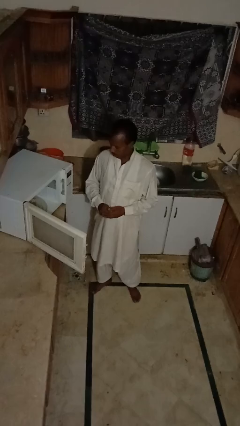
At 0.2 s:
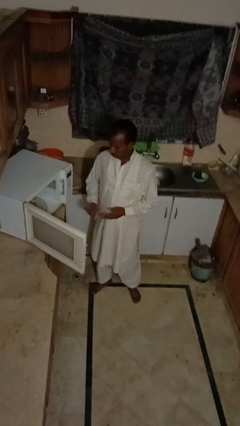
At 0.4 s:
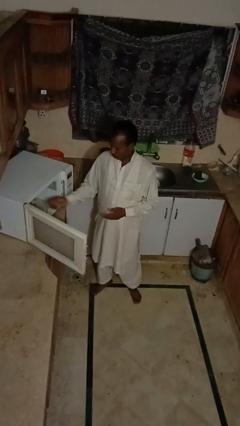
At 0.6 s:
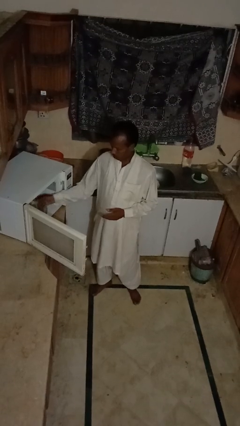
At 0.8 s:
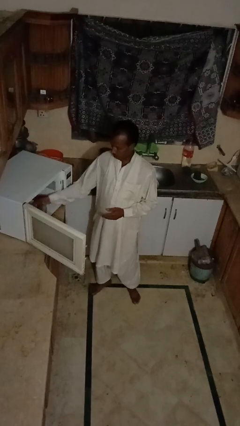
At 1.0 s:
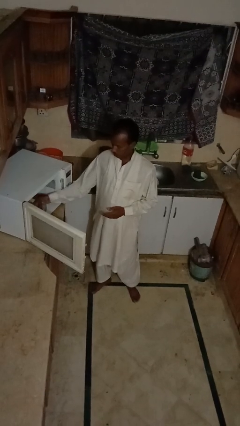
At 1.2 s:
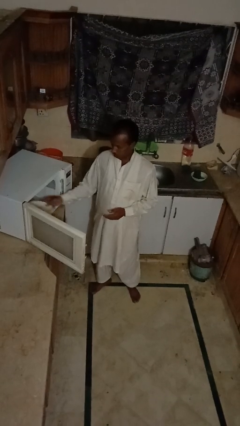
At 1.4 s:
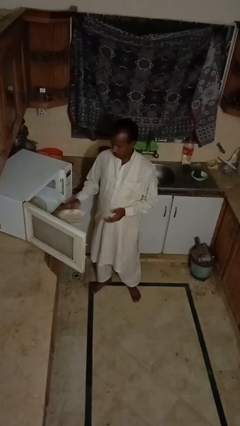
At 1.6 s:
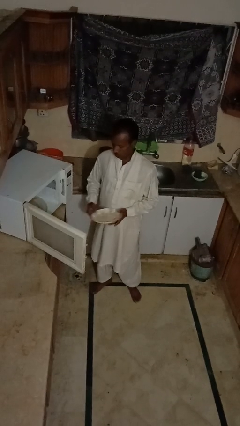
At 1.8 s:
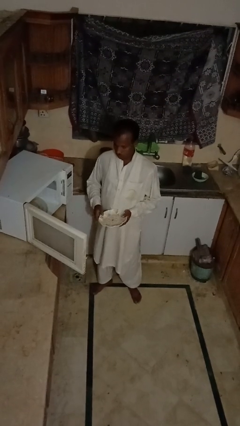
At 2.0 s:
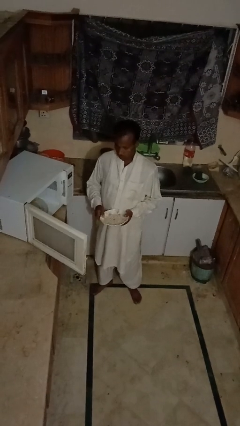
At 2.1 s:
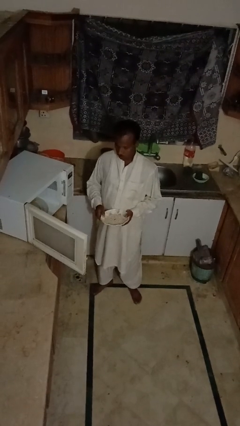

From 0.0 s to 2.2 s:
person takes object from microwave

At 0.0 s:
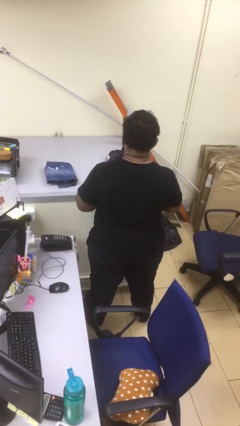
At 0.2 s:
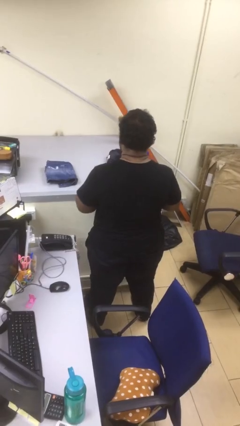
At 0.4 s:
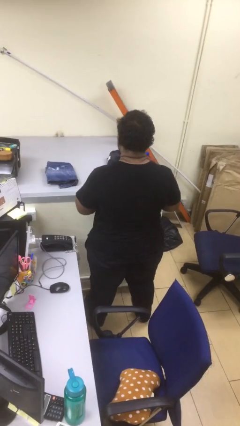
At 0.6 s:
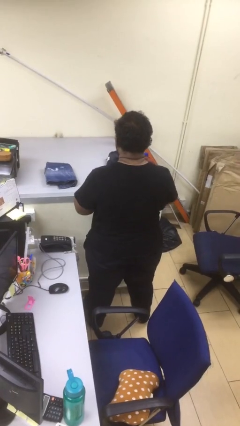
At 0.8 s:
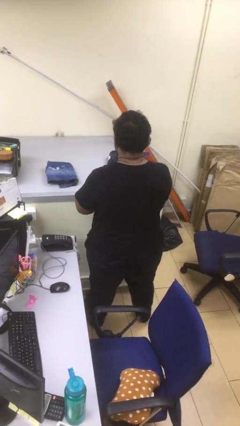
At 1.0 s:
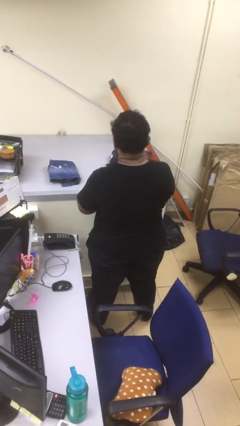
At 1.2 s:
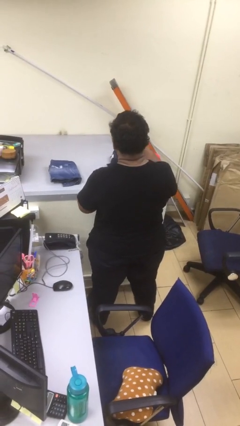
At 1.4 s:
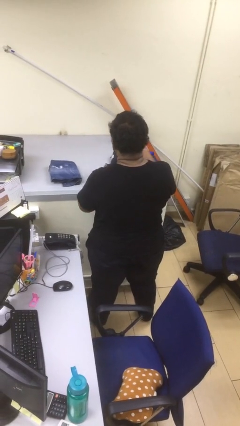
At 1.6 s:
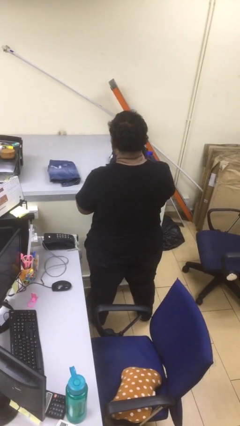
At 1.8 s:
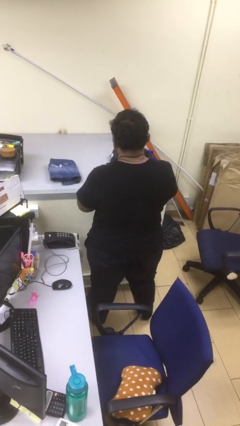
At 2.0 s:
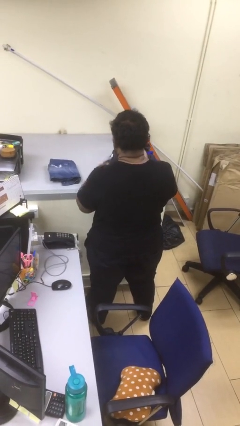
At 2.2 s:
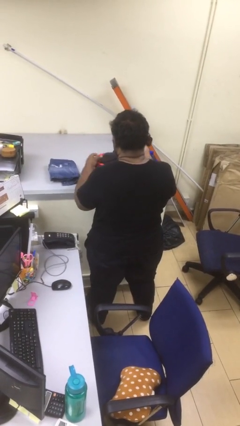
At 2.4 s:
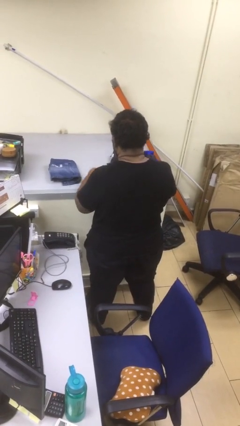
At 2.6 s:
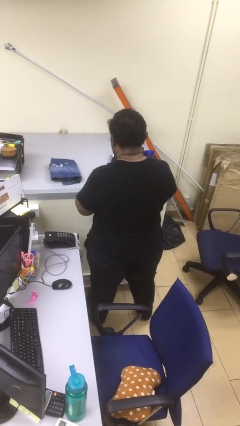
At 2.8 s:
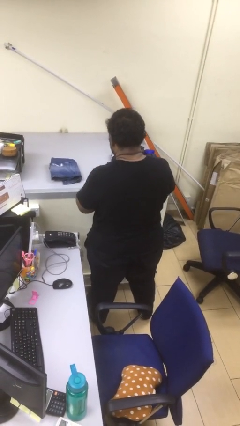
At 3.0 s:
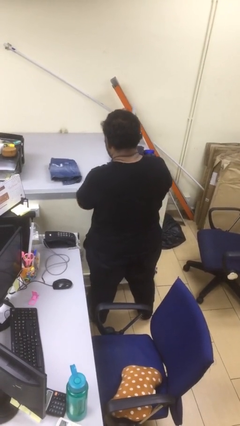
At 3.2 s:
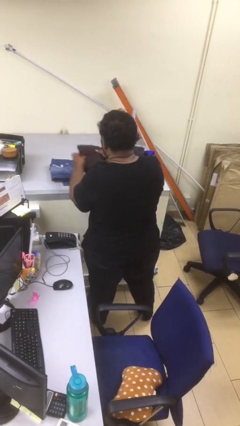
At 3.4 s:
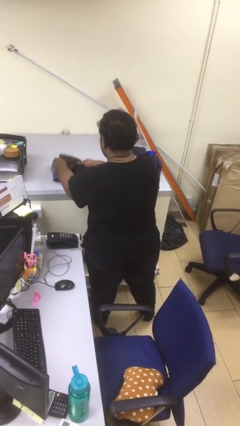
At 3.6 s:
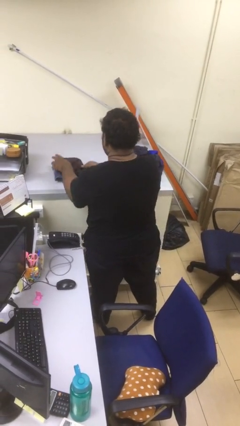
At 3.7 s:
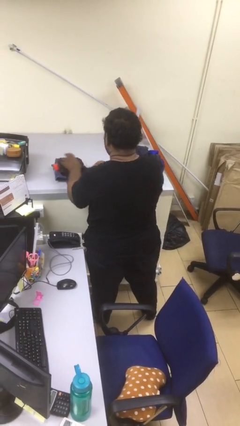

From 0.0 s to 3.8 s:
person folds shirt

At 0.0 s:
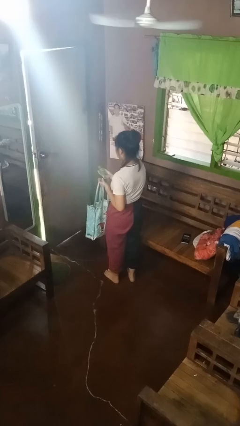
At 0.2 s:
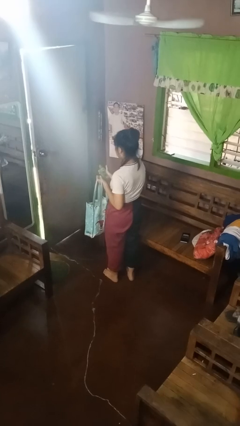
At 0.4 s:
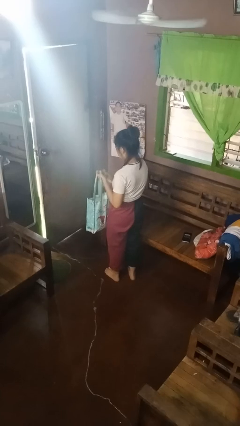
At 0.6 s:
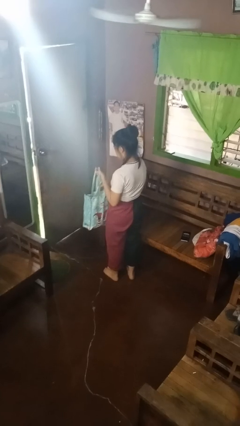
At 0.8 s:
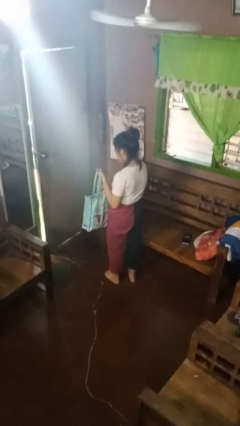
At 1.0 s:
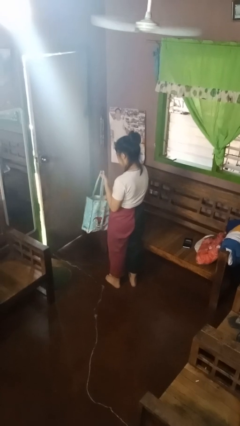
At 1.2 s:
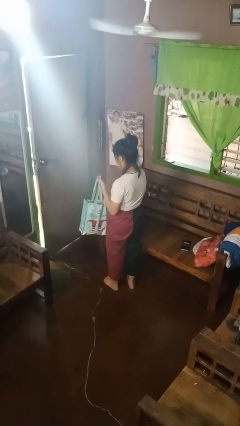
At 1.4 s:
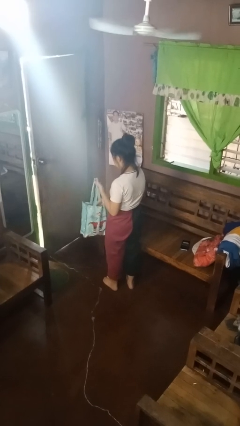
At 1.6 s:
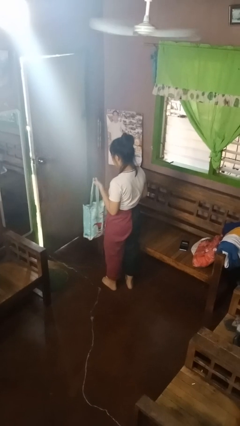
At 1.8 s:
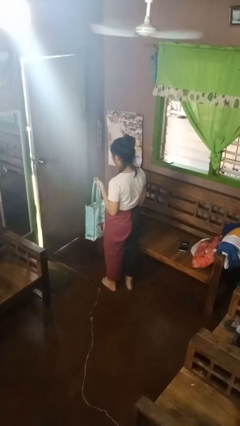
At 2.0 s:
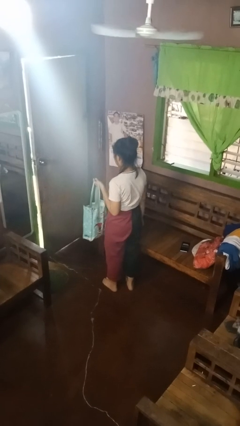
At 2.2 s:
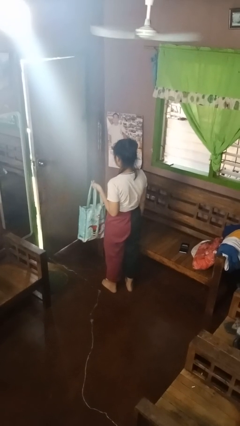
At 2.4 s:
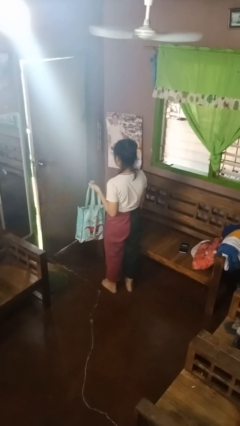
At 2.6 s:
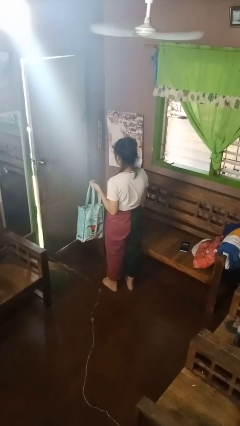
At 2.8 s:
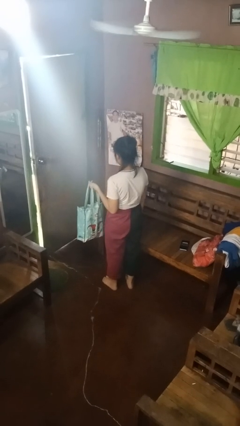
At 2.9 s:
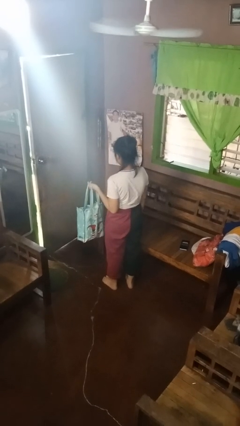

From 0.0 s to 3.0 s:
person puts object into bag

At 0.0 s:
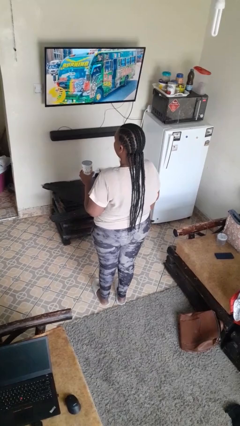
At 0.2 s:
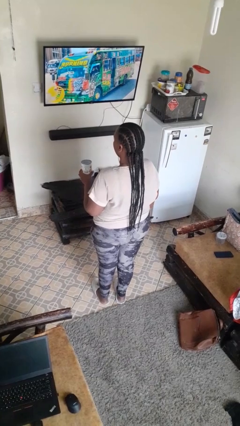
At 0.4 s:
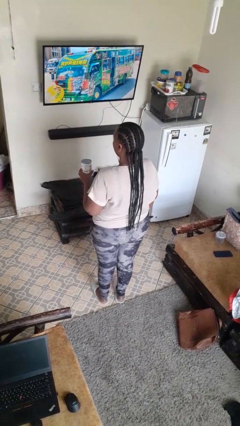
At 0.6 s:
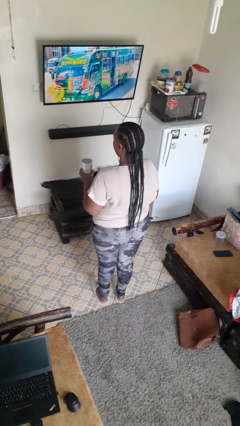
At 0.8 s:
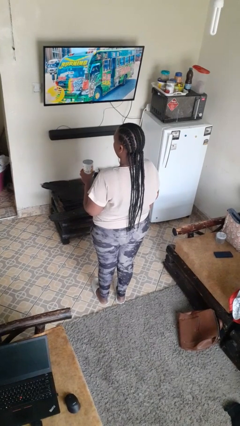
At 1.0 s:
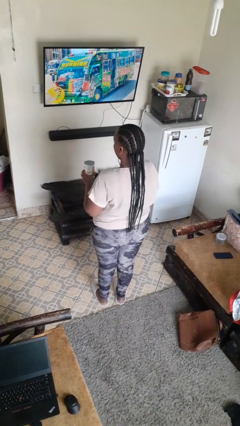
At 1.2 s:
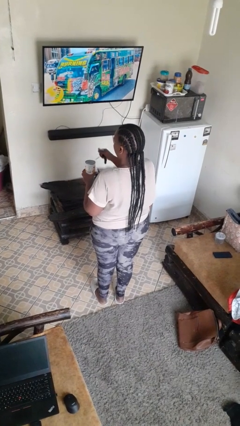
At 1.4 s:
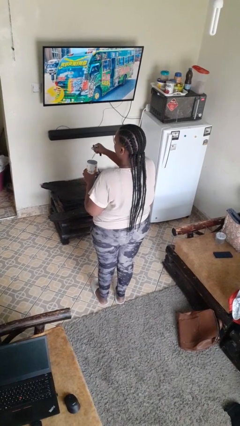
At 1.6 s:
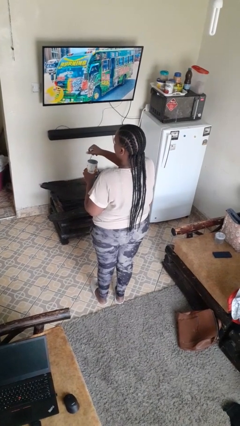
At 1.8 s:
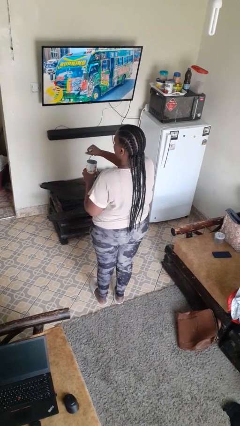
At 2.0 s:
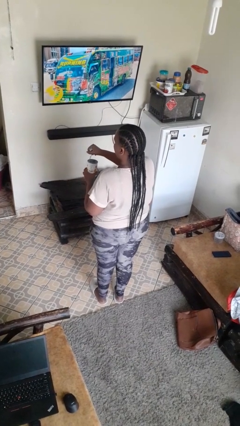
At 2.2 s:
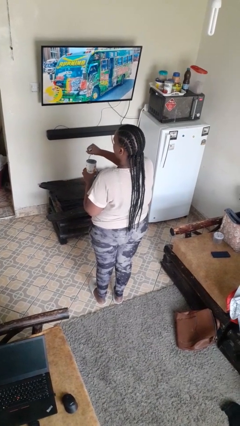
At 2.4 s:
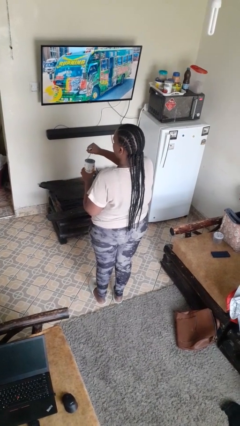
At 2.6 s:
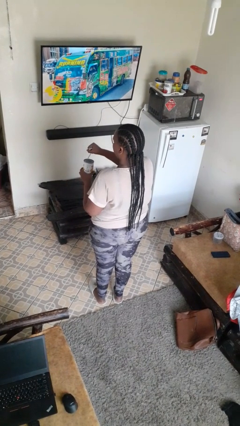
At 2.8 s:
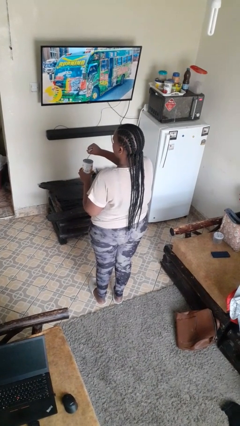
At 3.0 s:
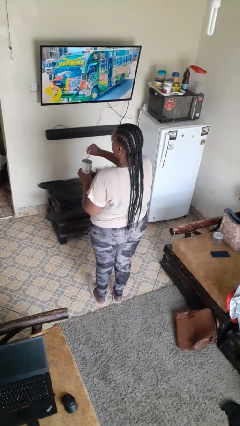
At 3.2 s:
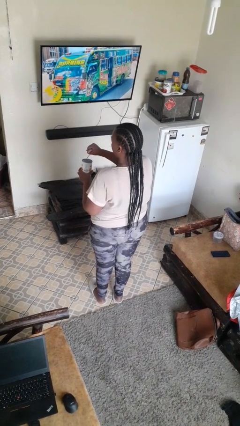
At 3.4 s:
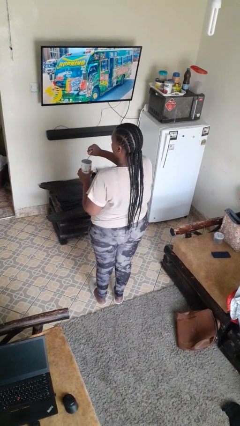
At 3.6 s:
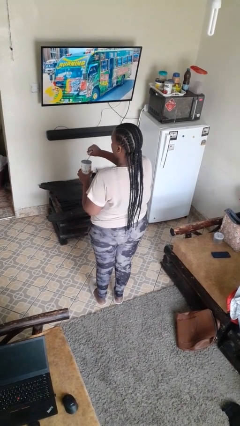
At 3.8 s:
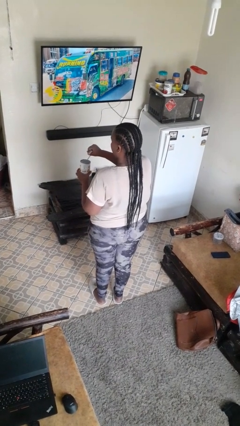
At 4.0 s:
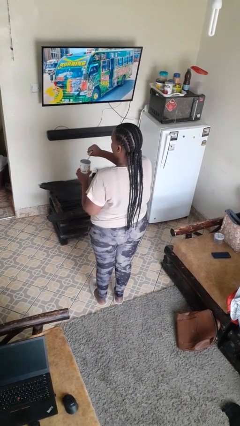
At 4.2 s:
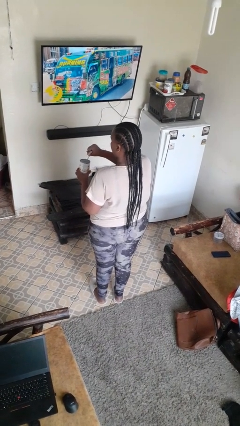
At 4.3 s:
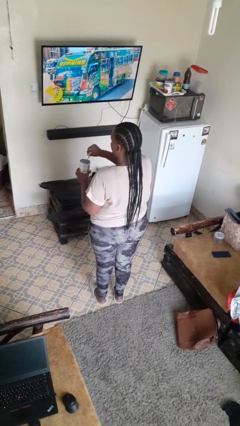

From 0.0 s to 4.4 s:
person opens can with can opener

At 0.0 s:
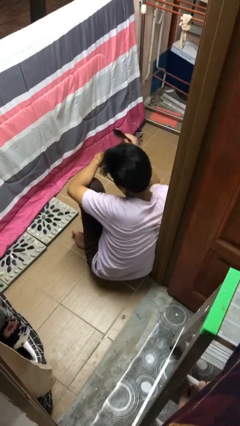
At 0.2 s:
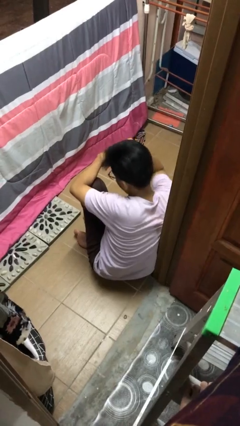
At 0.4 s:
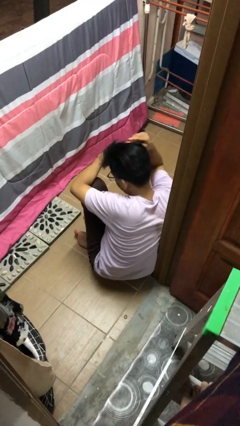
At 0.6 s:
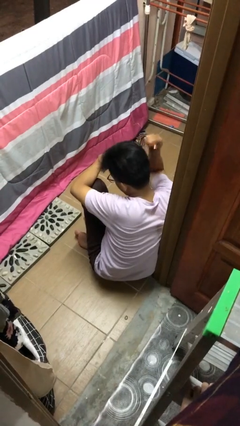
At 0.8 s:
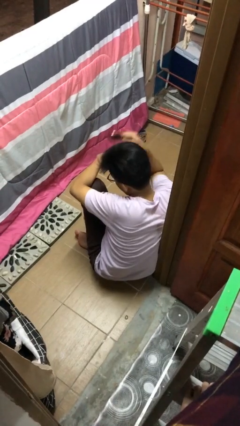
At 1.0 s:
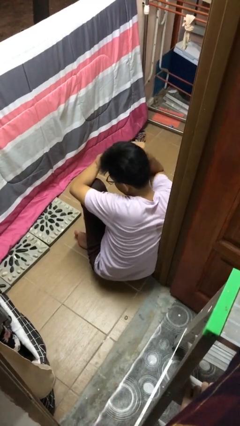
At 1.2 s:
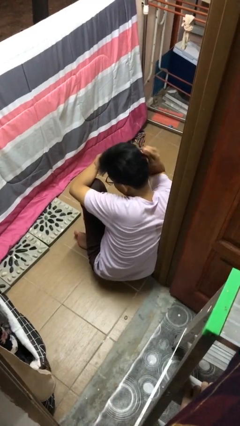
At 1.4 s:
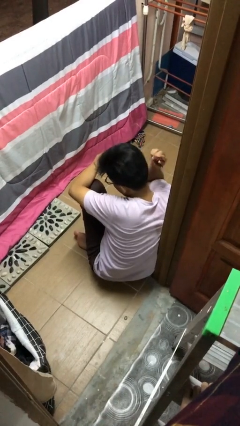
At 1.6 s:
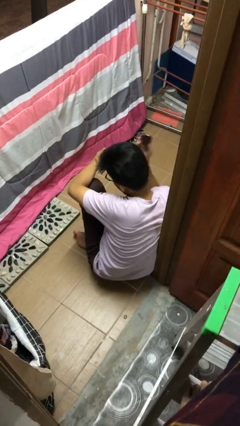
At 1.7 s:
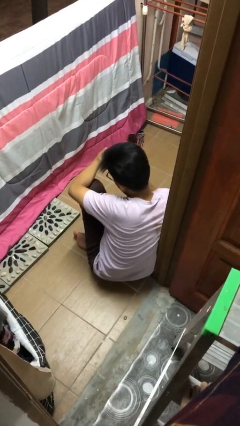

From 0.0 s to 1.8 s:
person brushes hair

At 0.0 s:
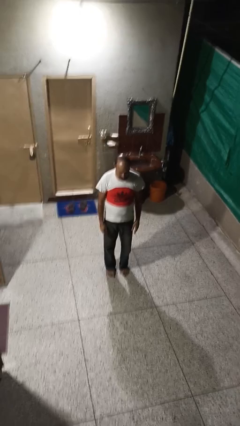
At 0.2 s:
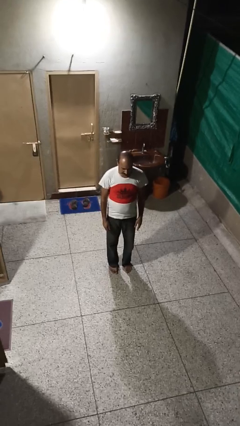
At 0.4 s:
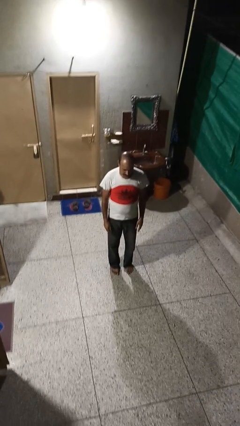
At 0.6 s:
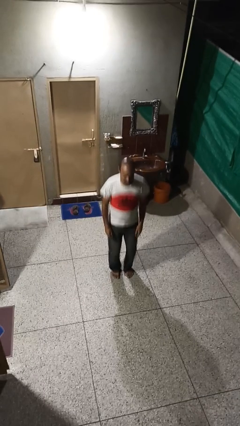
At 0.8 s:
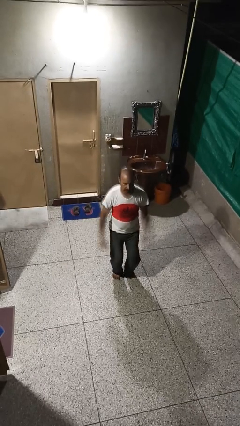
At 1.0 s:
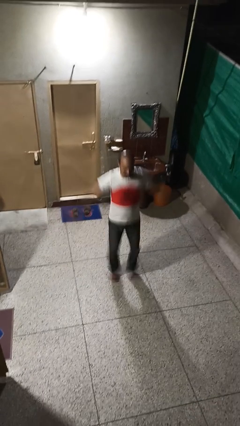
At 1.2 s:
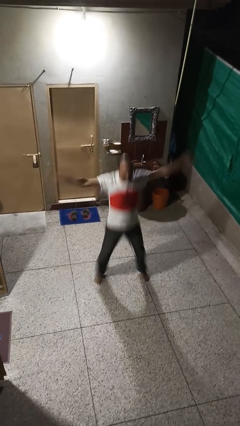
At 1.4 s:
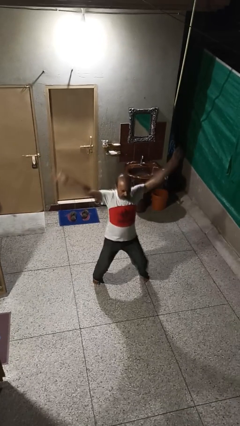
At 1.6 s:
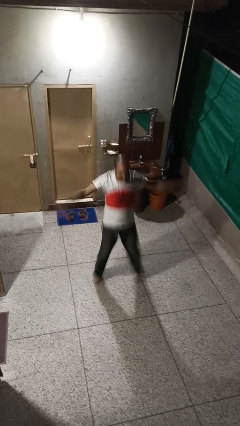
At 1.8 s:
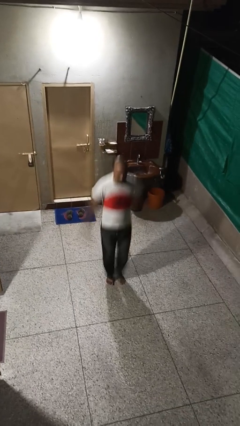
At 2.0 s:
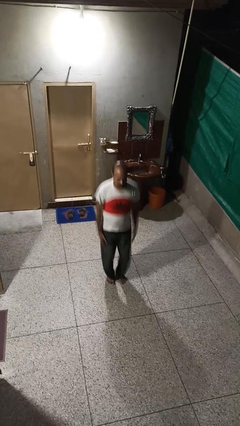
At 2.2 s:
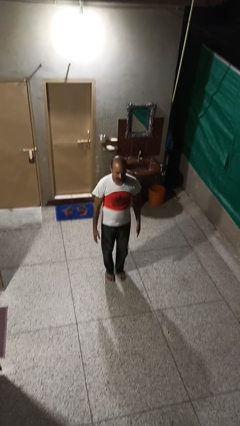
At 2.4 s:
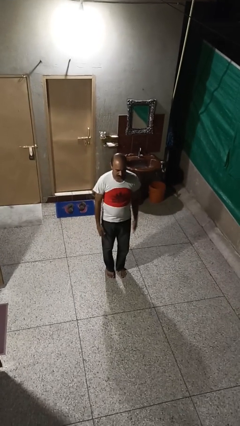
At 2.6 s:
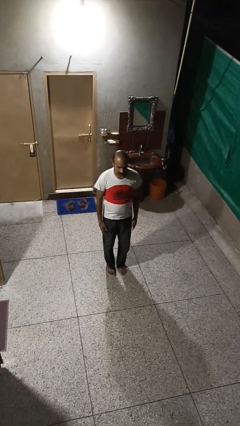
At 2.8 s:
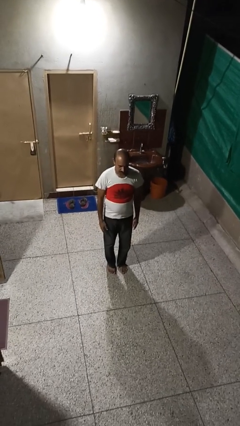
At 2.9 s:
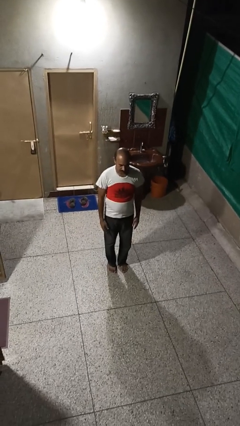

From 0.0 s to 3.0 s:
person exercises with jumping jacks
